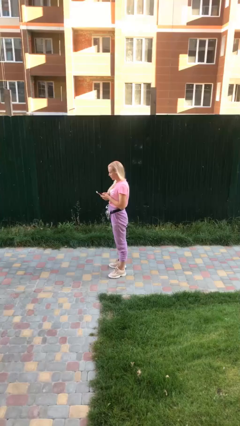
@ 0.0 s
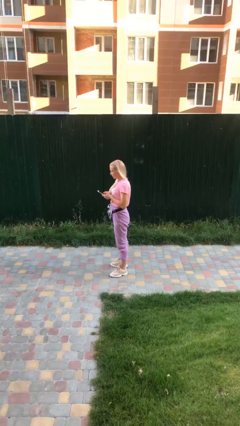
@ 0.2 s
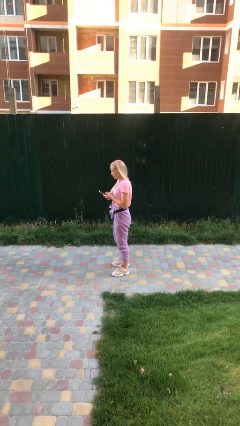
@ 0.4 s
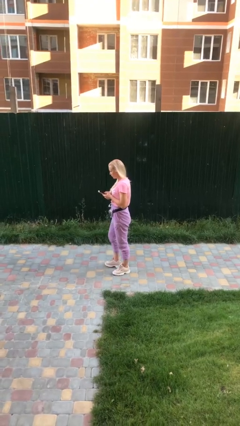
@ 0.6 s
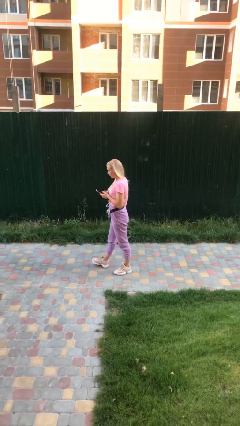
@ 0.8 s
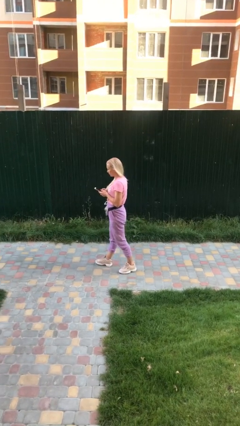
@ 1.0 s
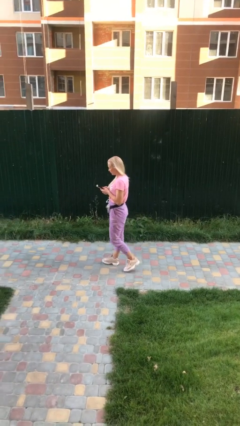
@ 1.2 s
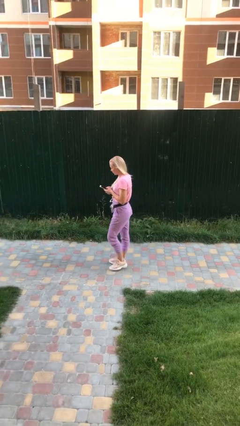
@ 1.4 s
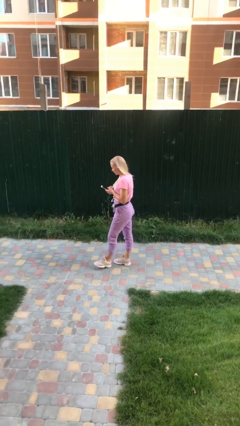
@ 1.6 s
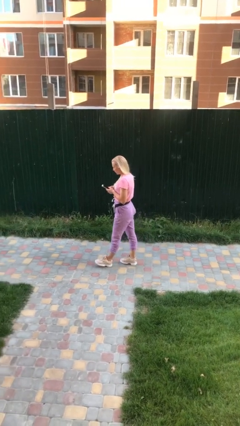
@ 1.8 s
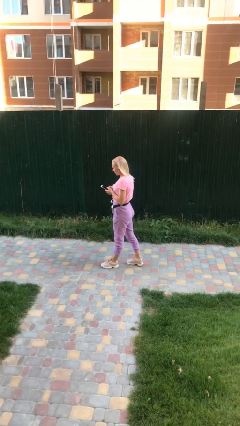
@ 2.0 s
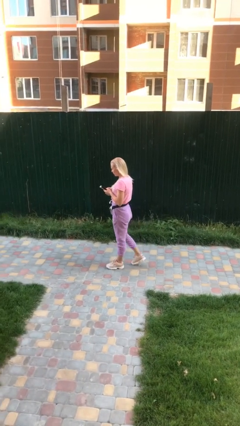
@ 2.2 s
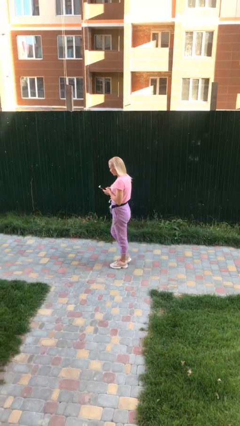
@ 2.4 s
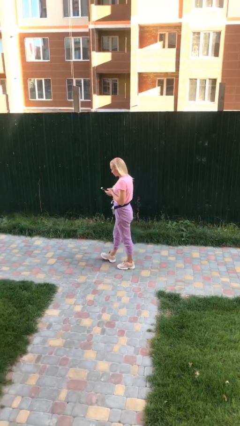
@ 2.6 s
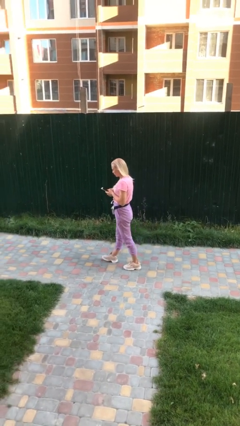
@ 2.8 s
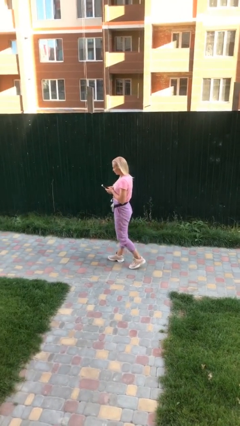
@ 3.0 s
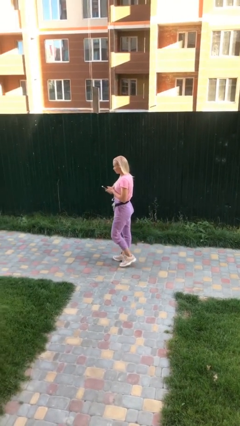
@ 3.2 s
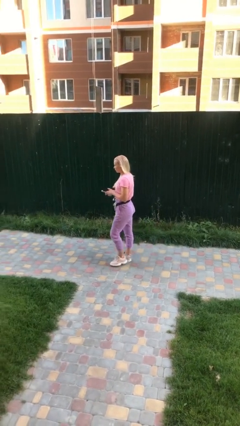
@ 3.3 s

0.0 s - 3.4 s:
person texts on phone

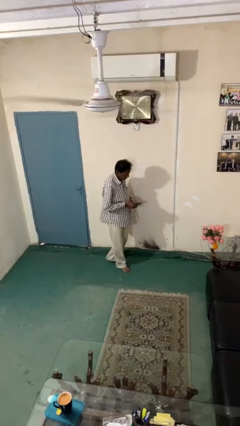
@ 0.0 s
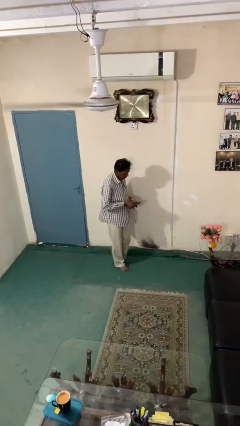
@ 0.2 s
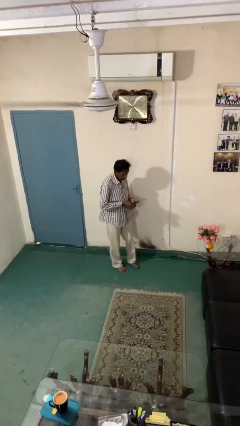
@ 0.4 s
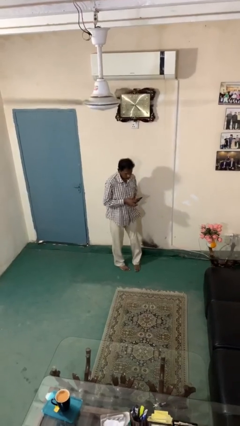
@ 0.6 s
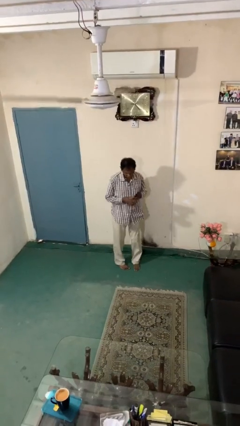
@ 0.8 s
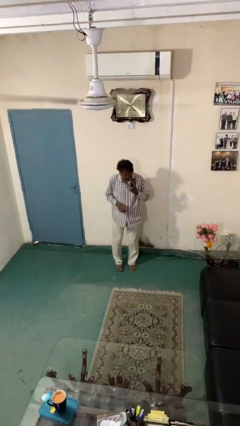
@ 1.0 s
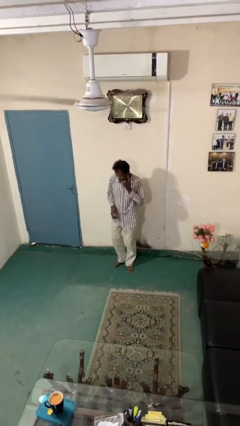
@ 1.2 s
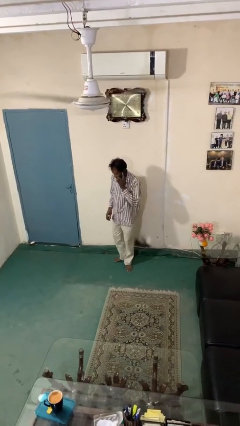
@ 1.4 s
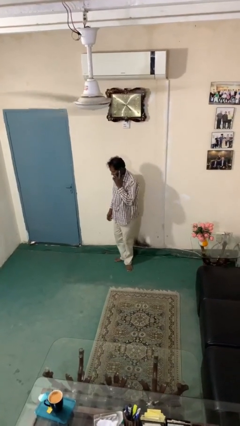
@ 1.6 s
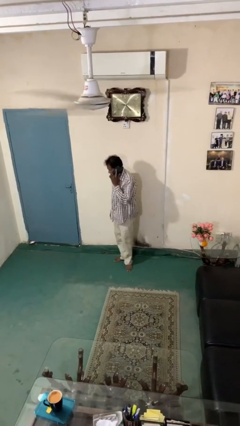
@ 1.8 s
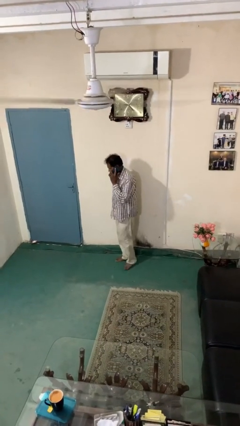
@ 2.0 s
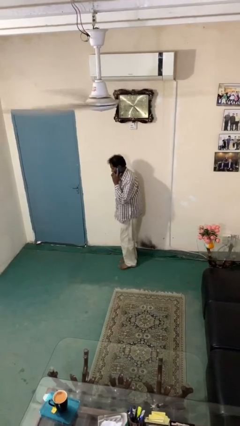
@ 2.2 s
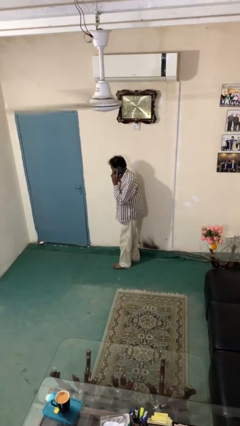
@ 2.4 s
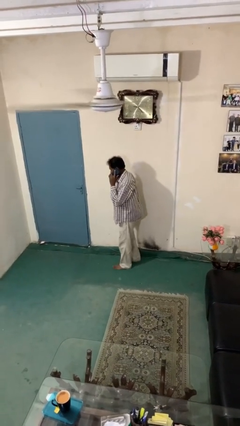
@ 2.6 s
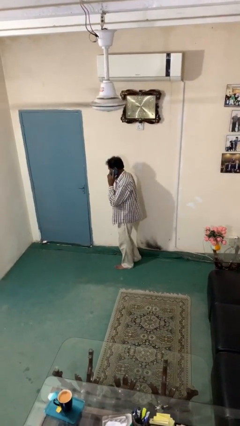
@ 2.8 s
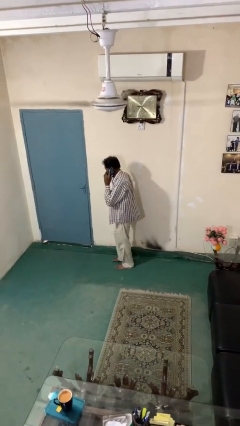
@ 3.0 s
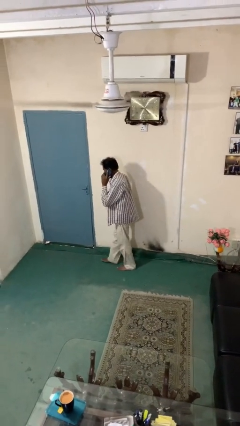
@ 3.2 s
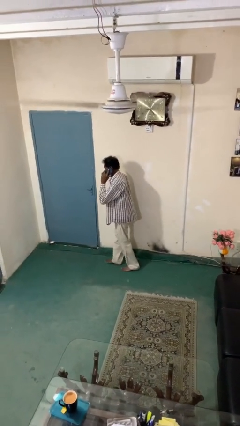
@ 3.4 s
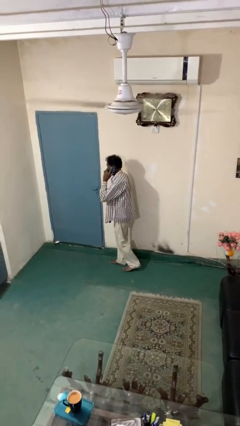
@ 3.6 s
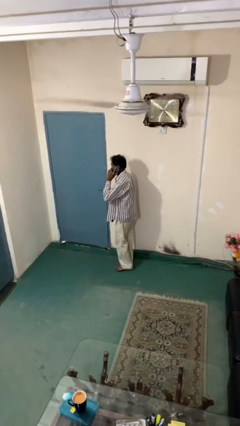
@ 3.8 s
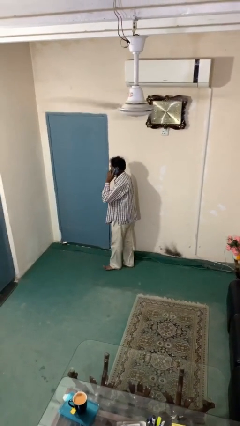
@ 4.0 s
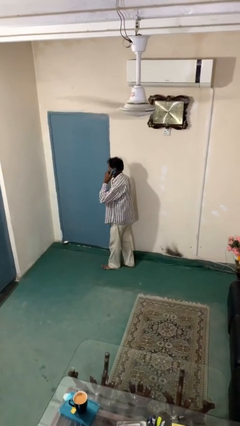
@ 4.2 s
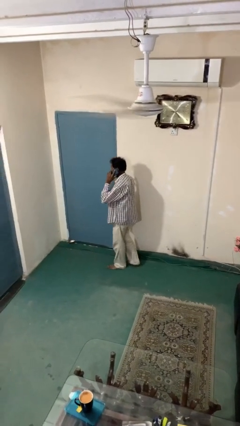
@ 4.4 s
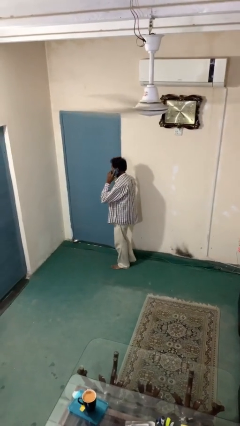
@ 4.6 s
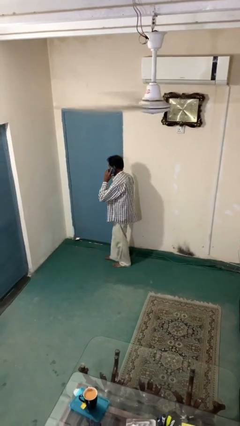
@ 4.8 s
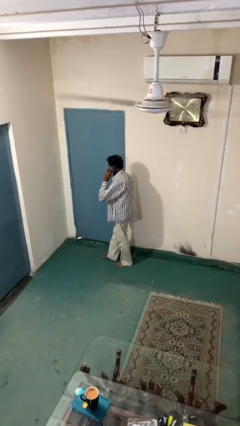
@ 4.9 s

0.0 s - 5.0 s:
person talks on phone

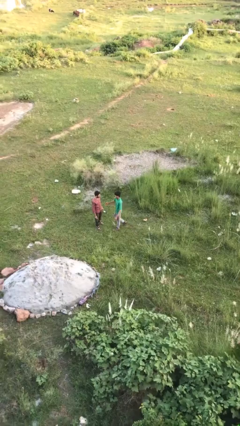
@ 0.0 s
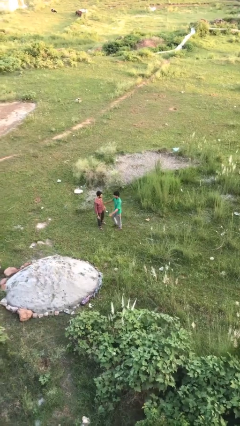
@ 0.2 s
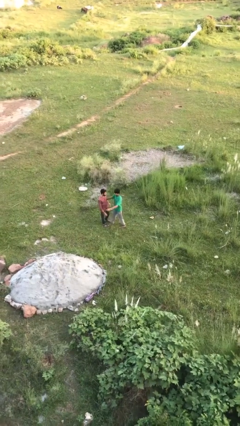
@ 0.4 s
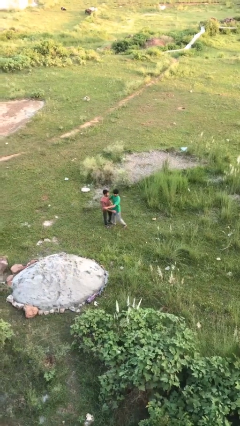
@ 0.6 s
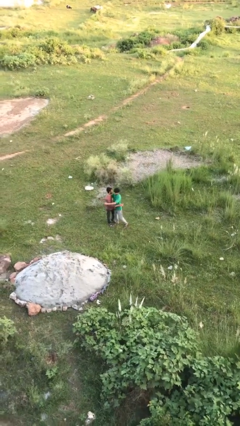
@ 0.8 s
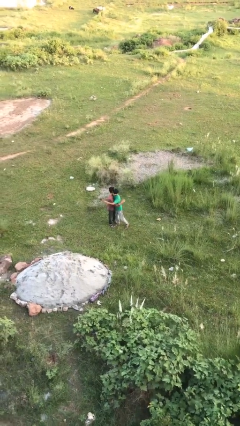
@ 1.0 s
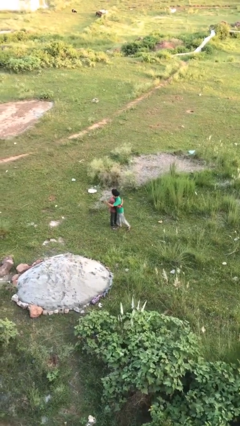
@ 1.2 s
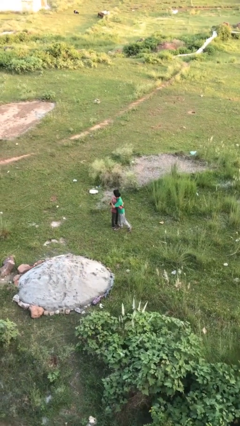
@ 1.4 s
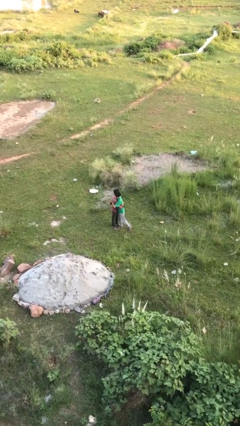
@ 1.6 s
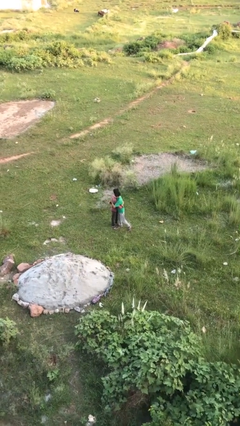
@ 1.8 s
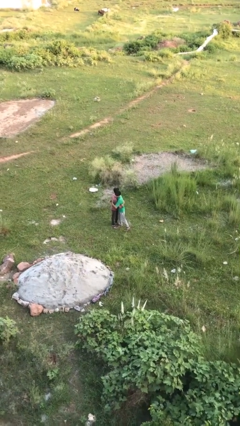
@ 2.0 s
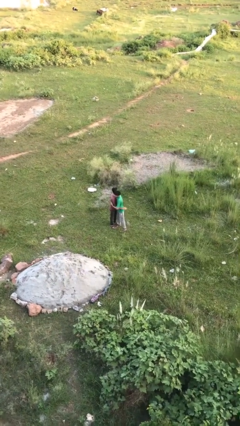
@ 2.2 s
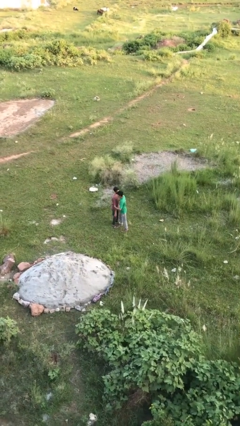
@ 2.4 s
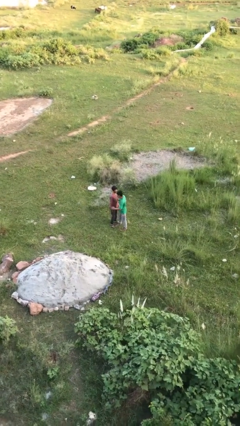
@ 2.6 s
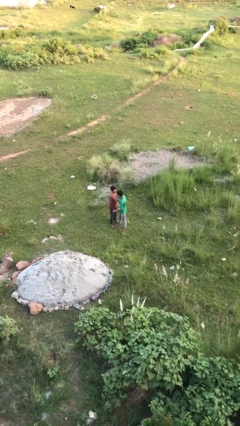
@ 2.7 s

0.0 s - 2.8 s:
person embraces person

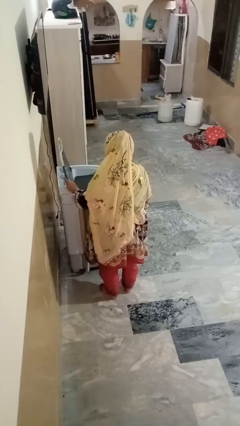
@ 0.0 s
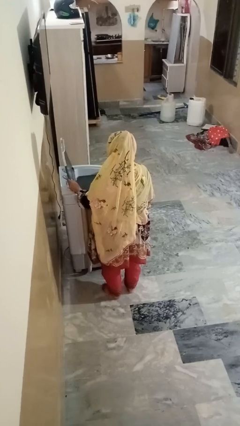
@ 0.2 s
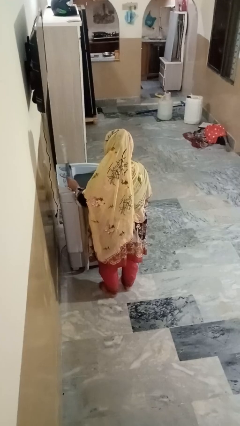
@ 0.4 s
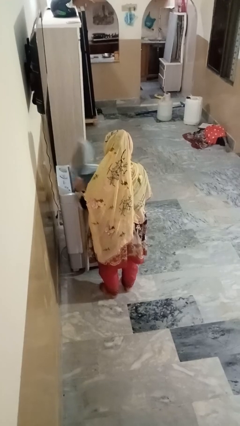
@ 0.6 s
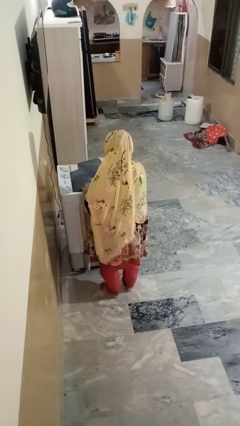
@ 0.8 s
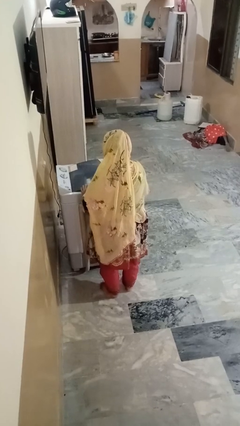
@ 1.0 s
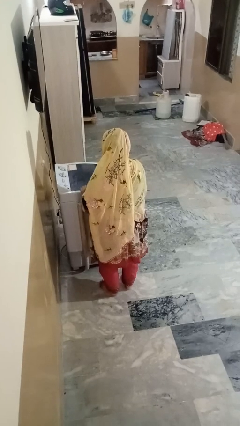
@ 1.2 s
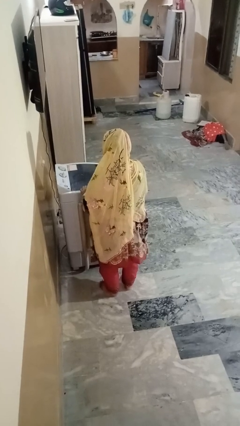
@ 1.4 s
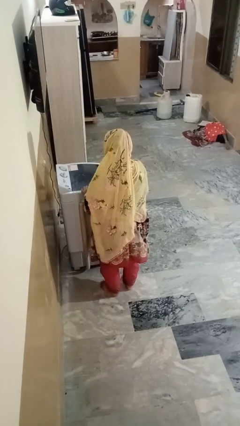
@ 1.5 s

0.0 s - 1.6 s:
person closes clothes washer

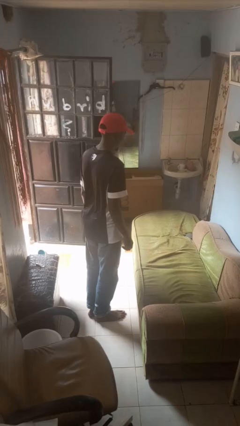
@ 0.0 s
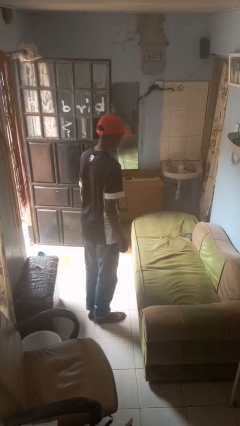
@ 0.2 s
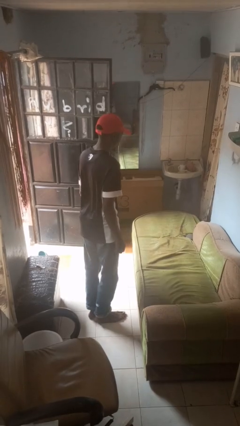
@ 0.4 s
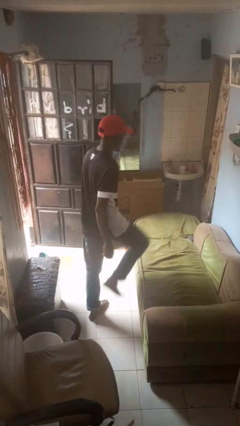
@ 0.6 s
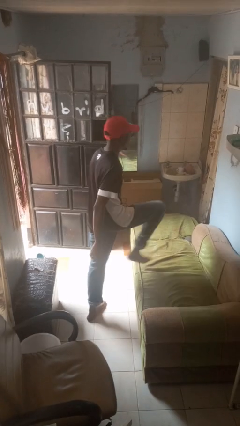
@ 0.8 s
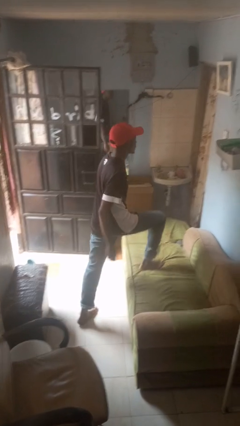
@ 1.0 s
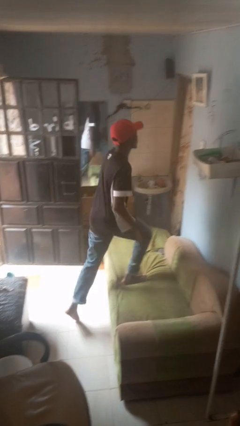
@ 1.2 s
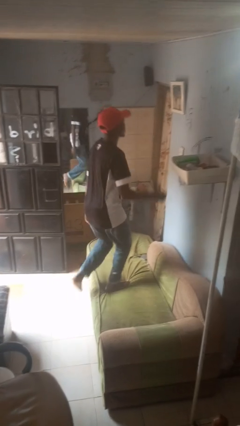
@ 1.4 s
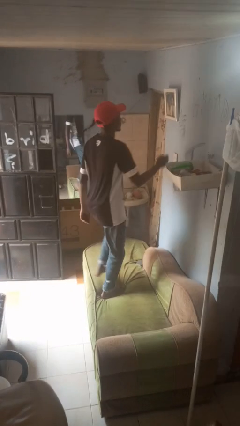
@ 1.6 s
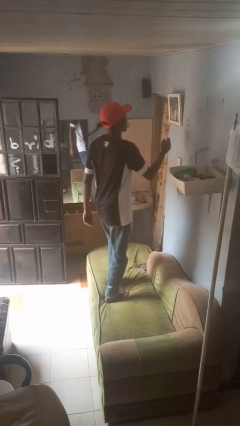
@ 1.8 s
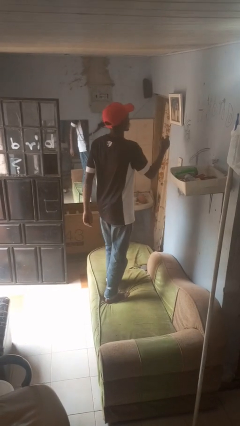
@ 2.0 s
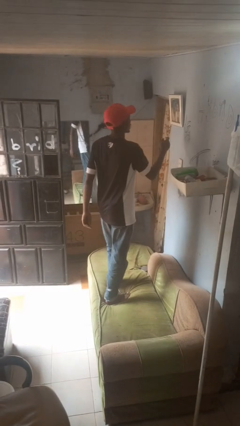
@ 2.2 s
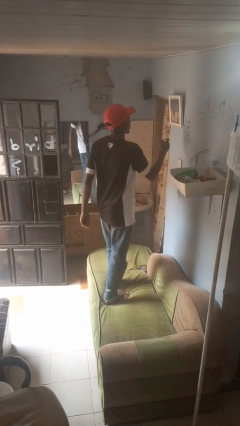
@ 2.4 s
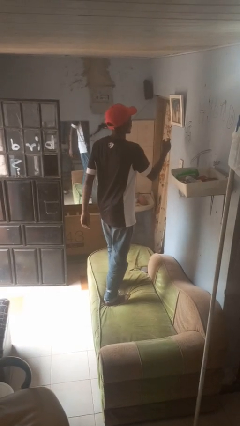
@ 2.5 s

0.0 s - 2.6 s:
person climbs on couch

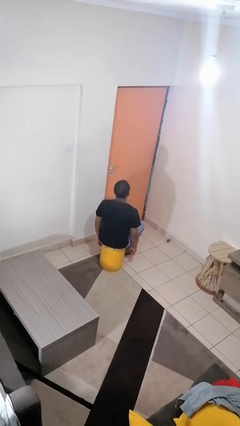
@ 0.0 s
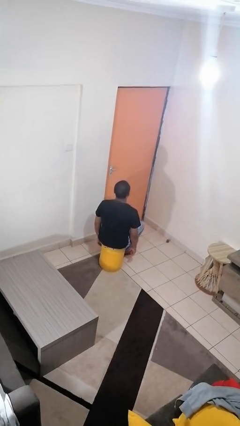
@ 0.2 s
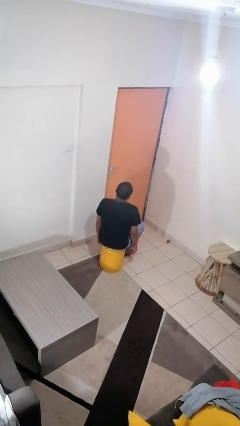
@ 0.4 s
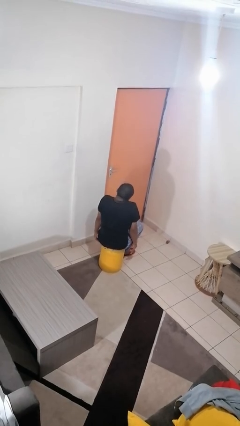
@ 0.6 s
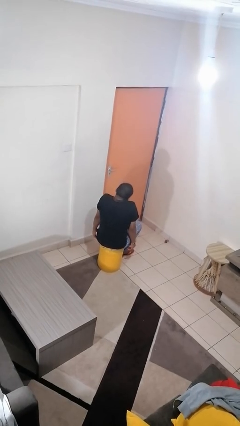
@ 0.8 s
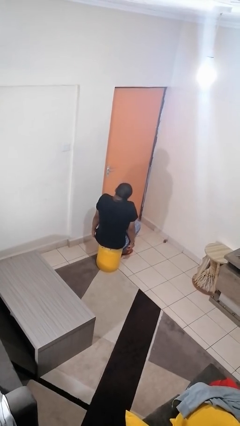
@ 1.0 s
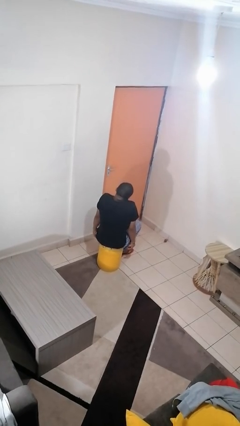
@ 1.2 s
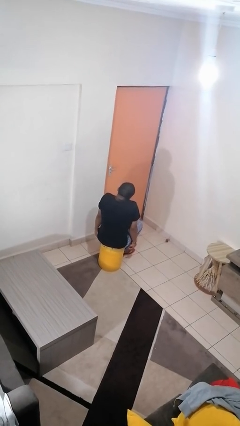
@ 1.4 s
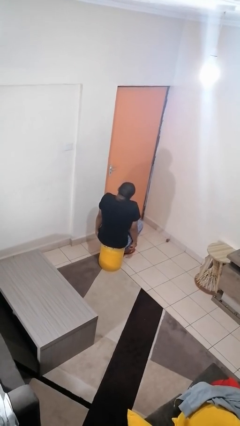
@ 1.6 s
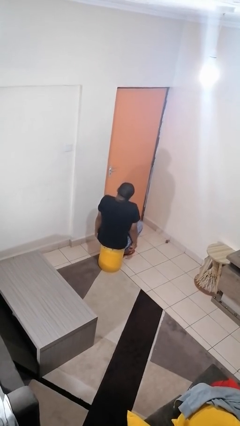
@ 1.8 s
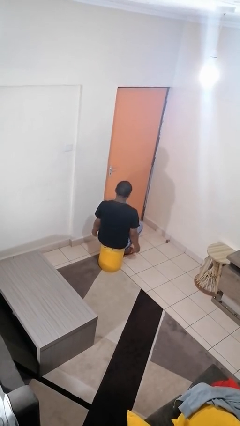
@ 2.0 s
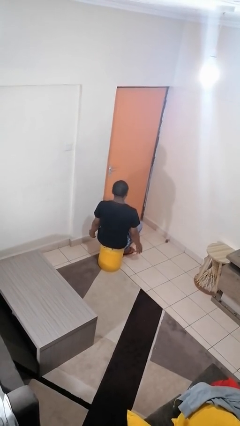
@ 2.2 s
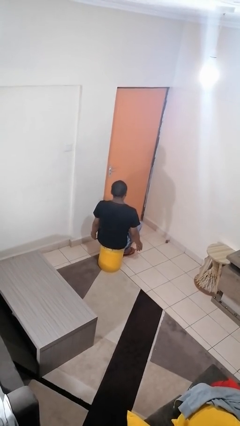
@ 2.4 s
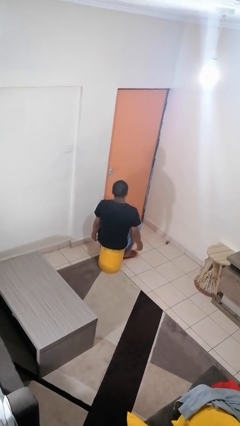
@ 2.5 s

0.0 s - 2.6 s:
person shrugs
